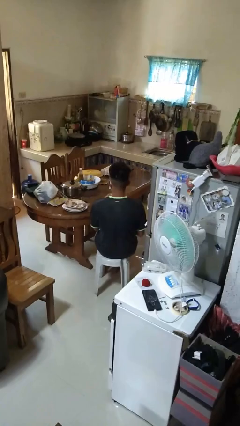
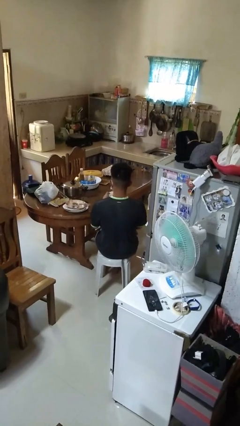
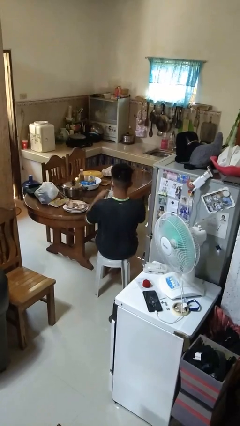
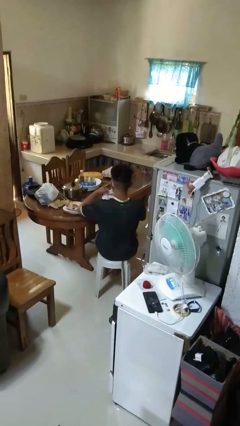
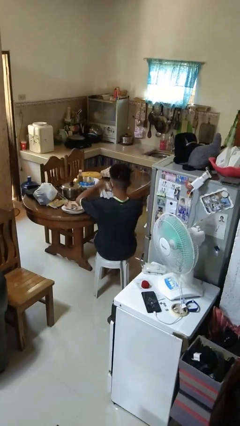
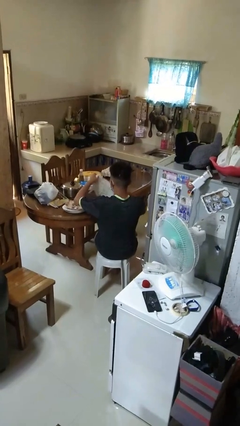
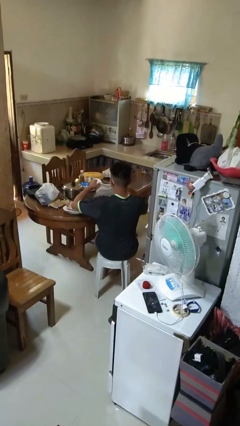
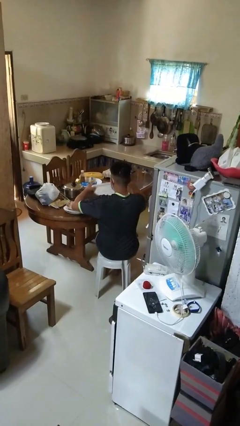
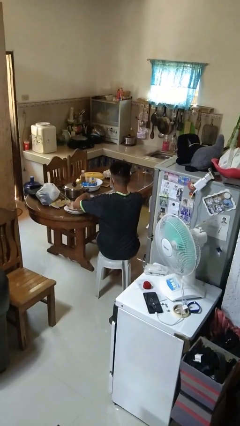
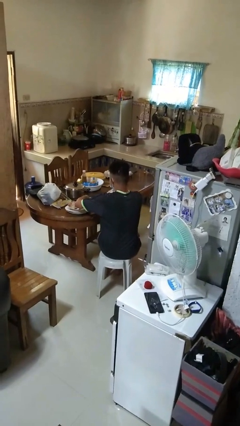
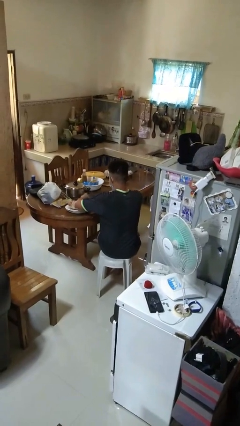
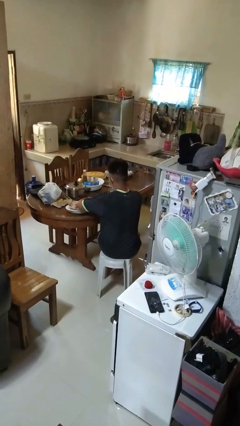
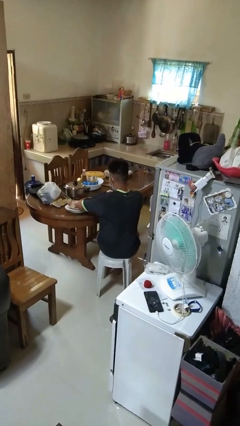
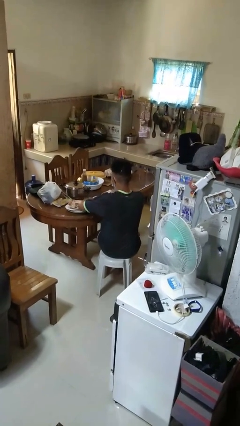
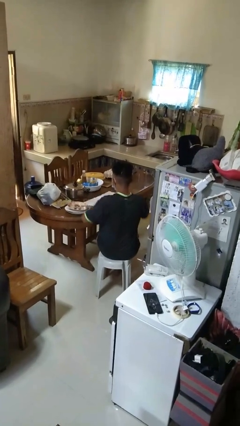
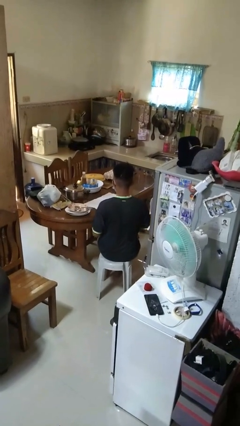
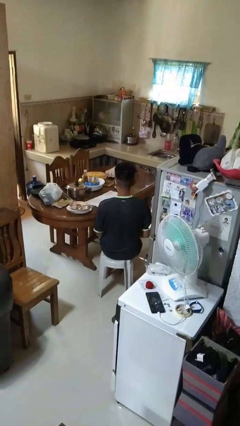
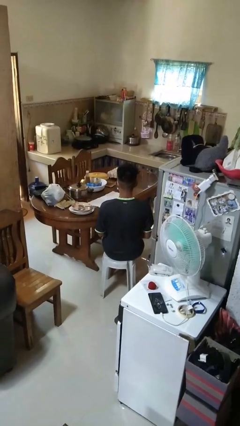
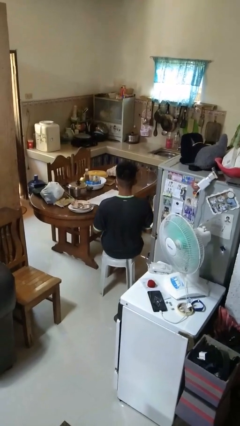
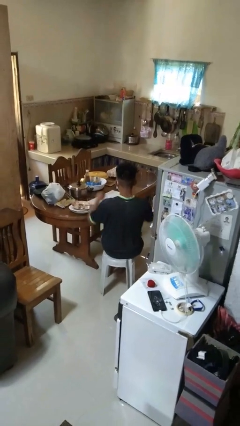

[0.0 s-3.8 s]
person spreads tablecloth

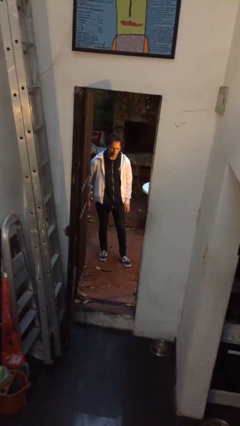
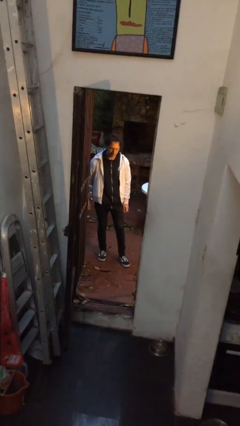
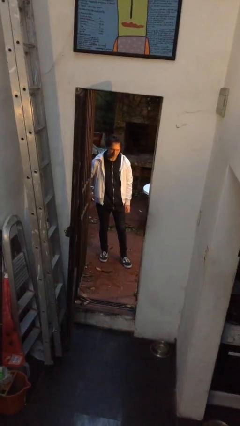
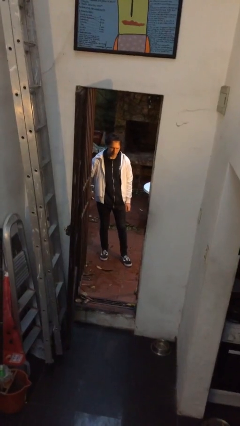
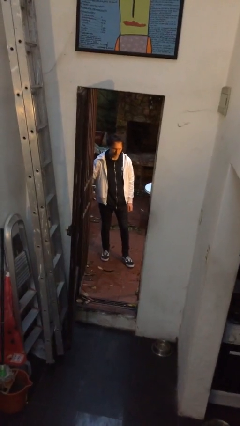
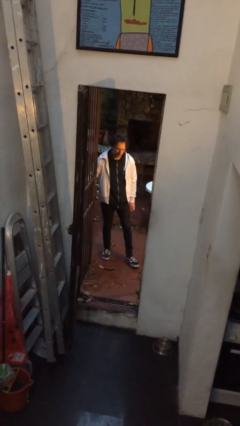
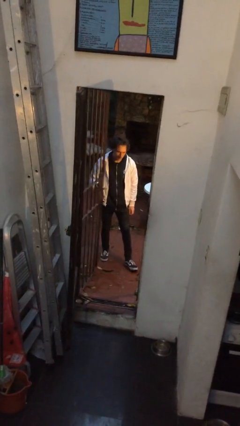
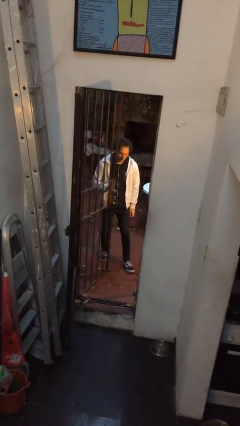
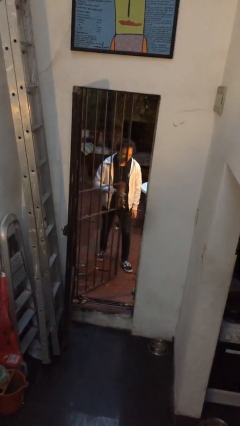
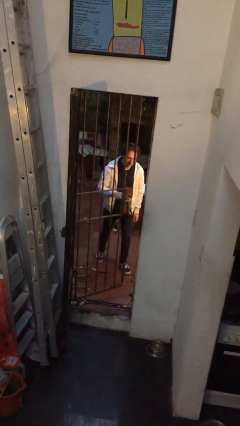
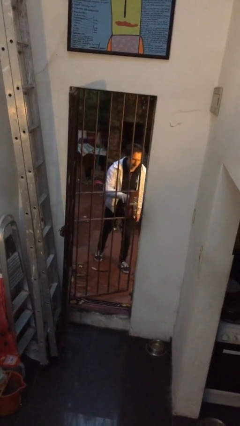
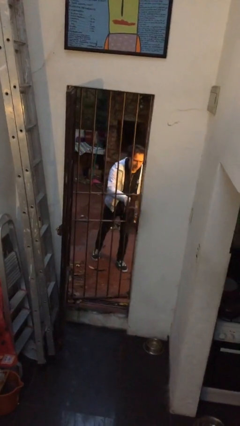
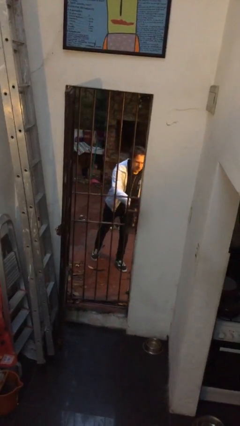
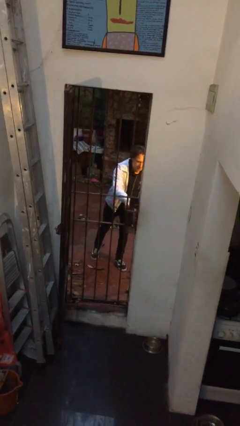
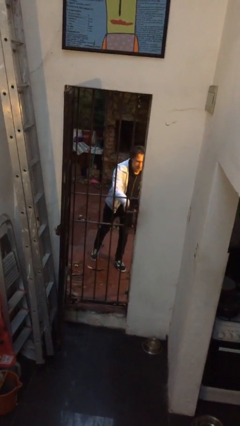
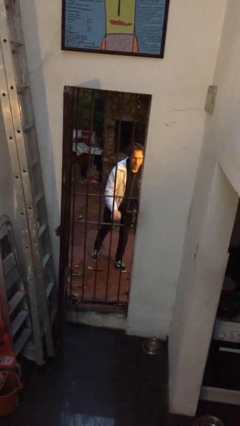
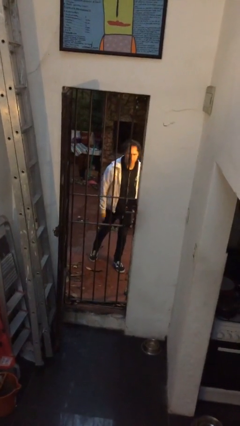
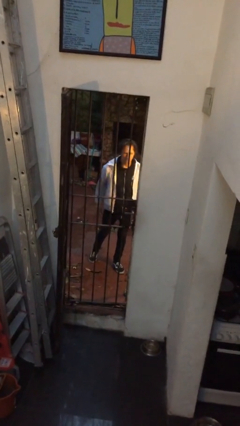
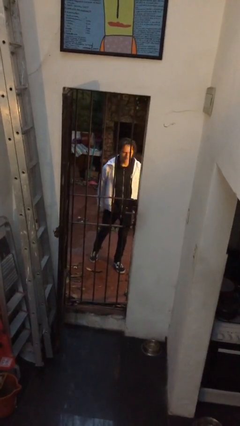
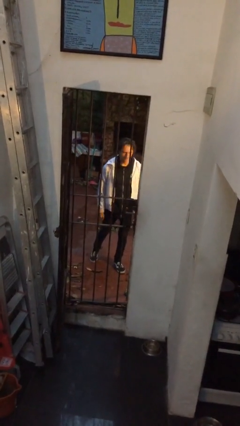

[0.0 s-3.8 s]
person closes gate

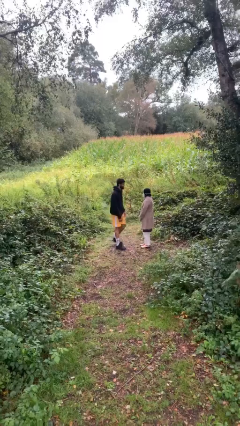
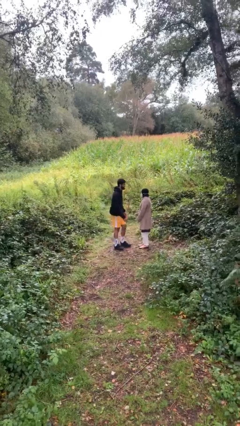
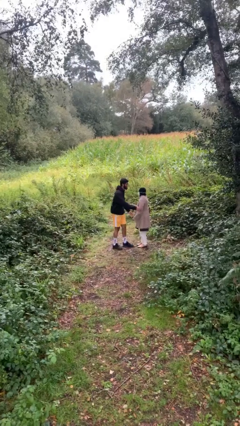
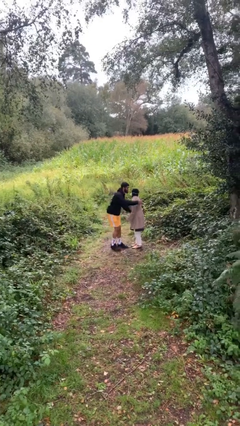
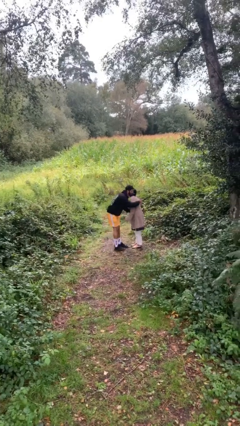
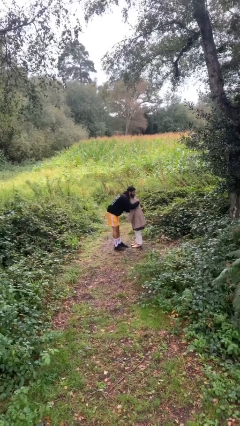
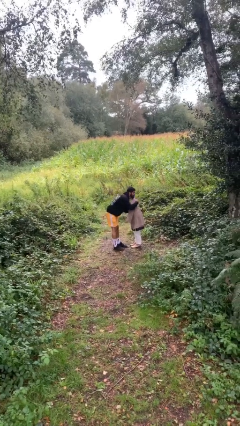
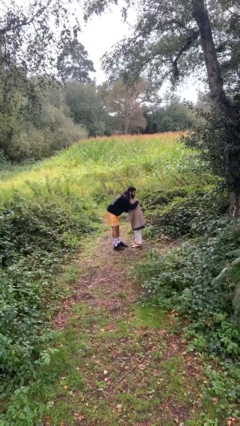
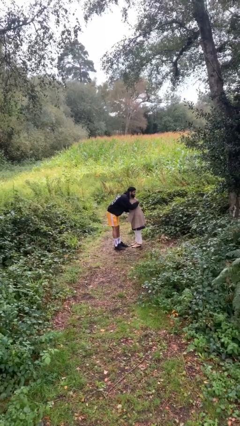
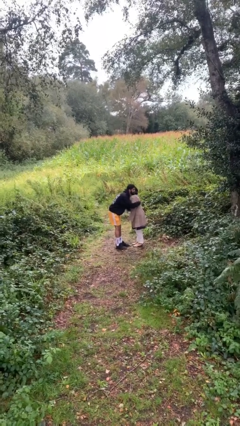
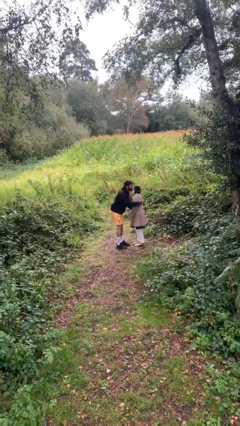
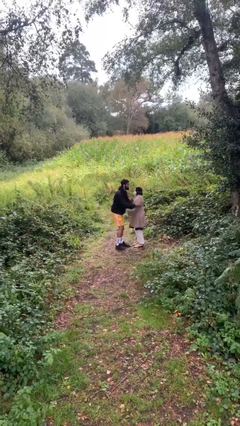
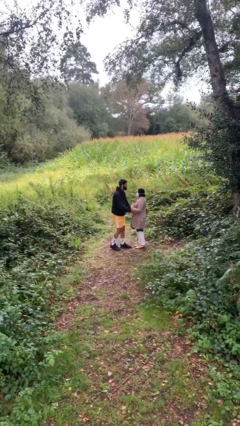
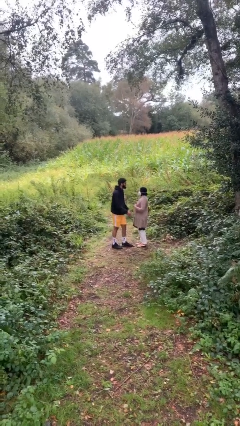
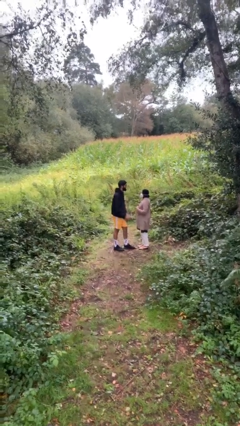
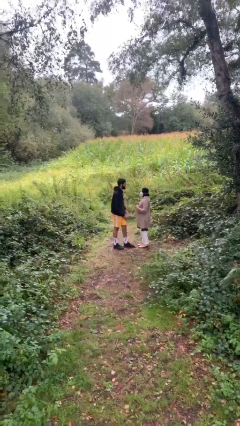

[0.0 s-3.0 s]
person embraces person

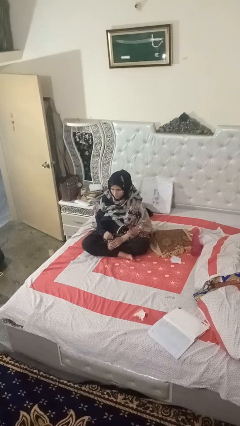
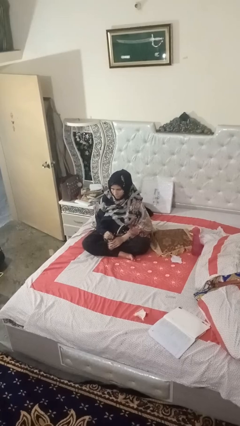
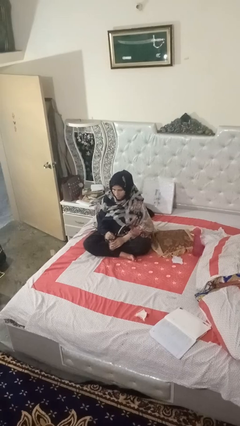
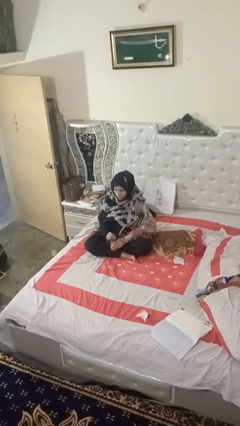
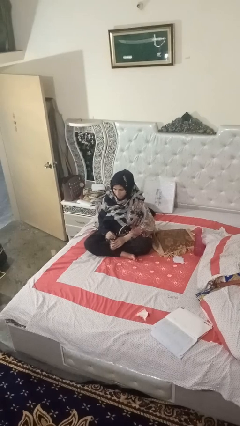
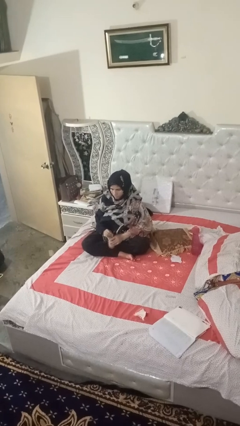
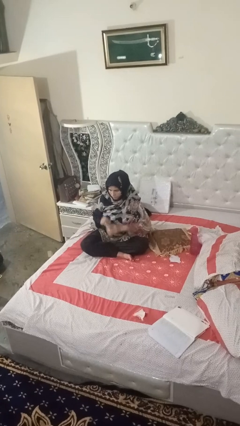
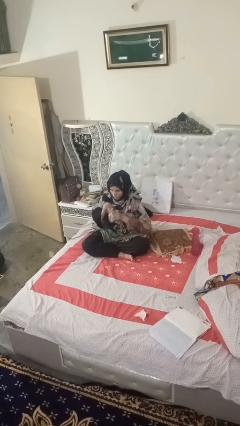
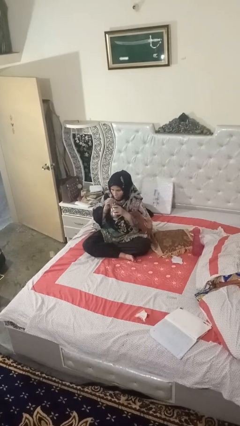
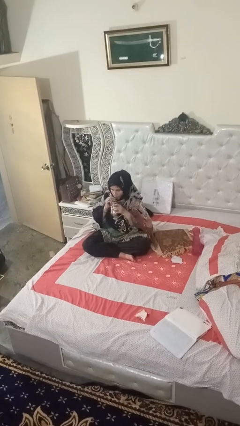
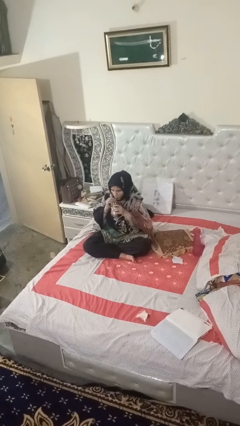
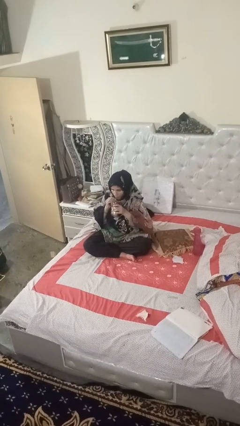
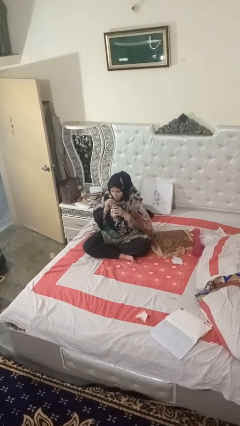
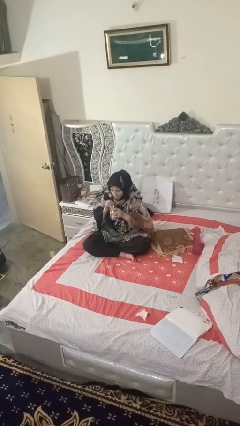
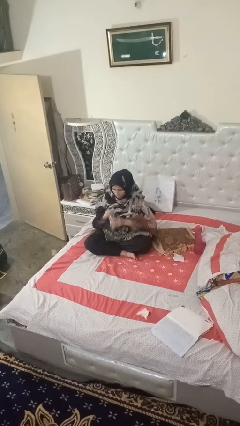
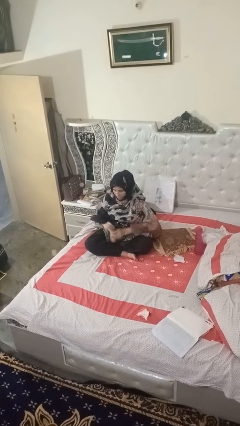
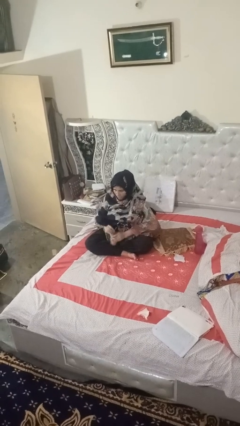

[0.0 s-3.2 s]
person drinks from straw

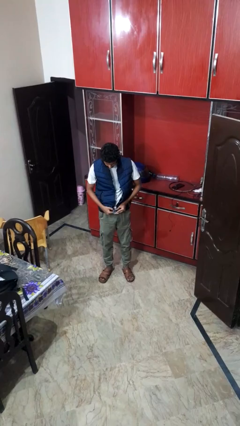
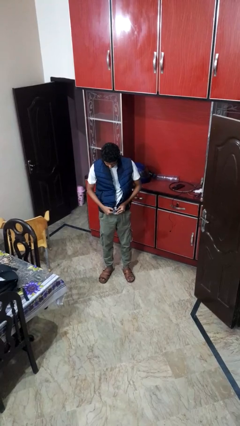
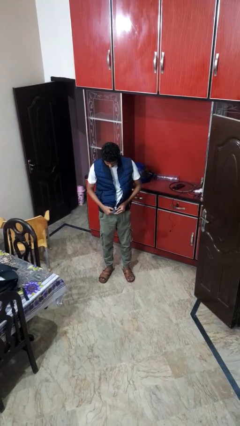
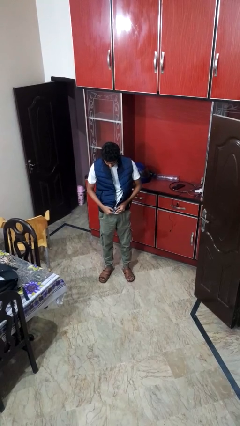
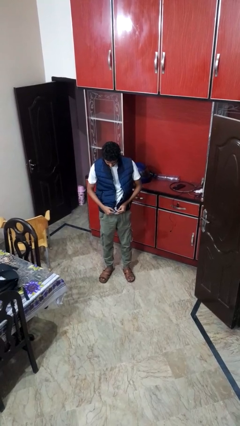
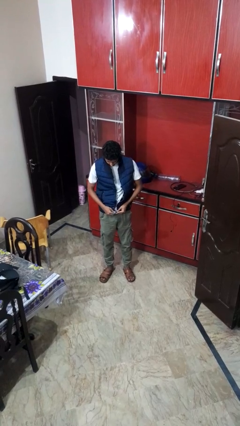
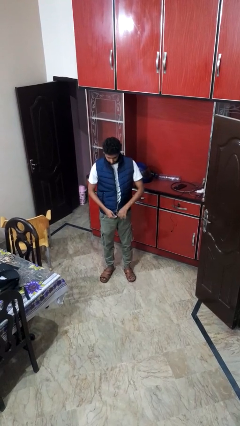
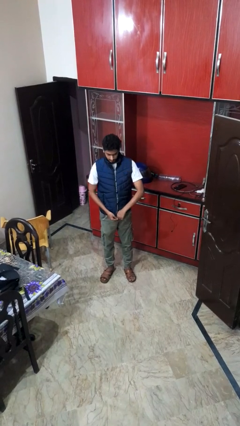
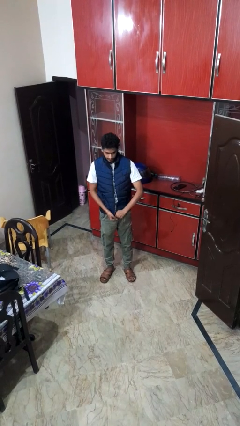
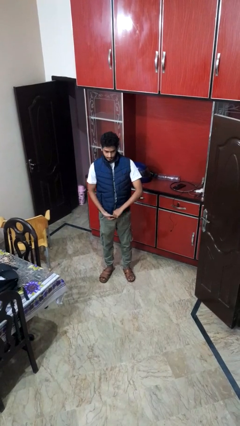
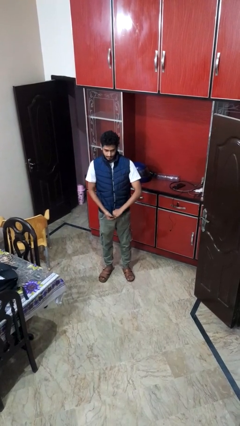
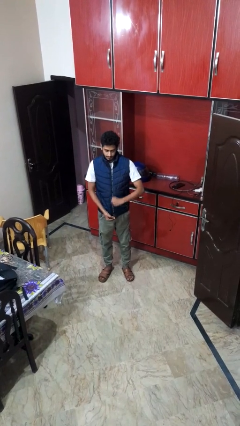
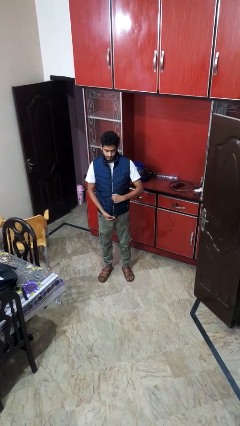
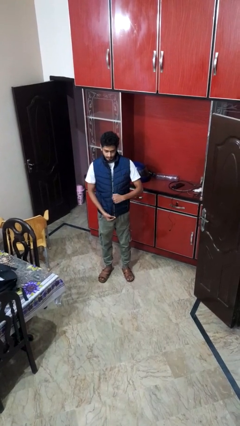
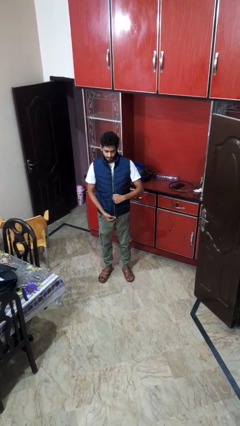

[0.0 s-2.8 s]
person zips up jacket

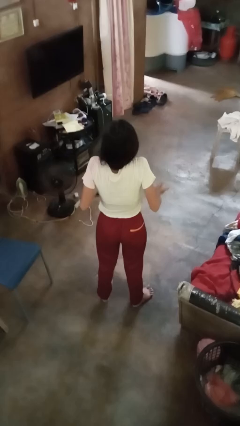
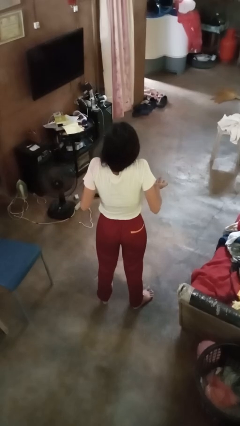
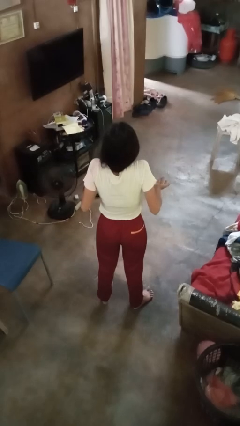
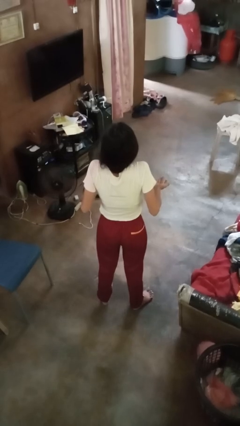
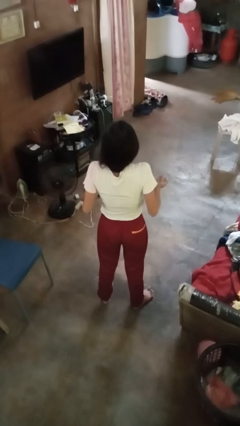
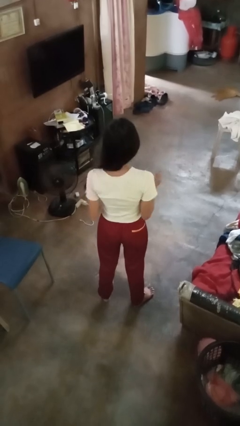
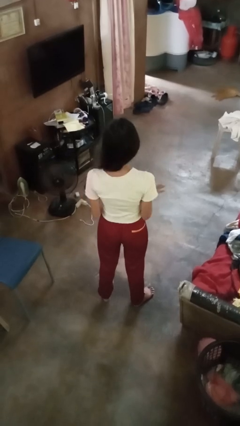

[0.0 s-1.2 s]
person shrugs
